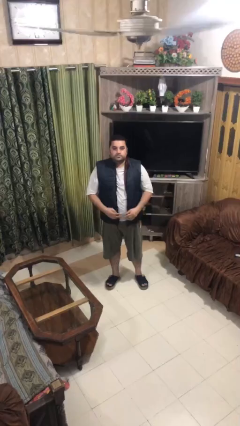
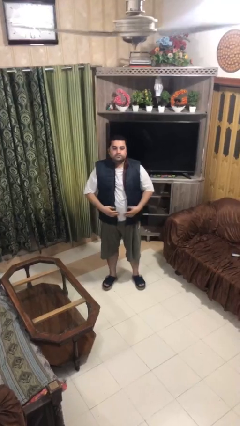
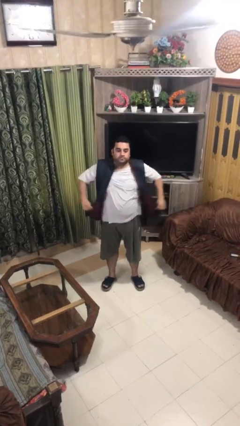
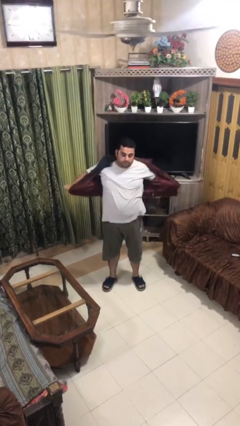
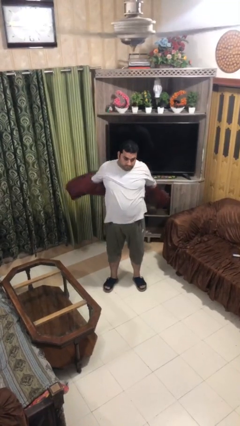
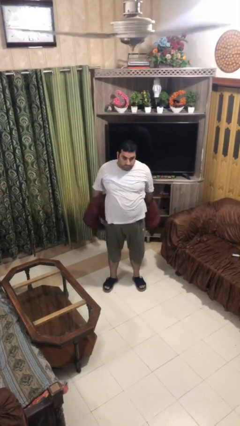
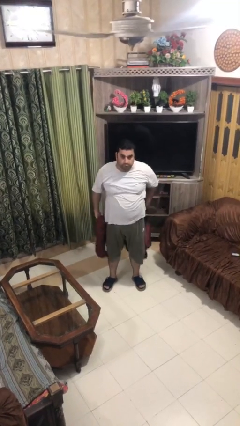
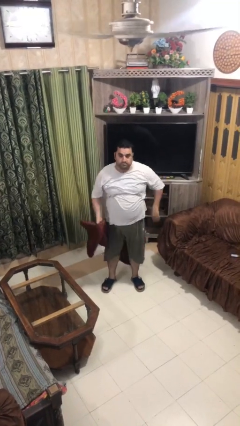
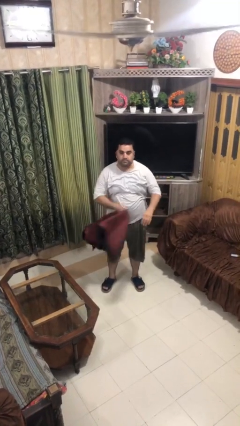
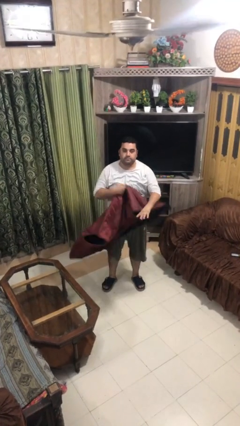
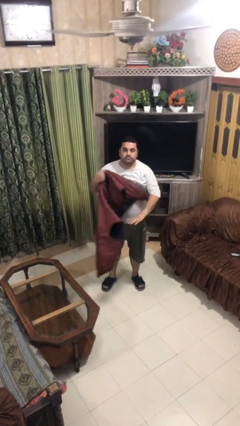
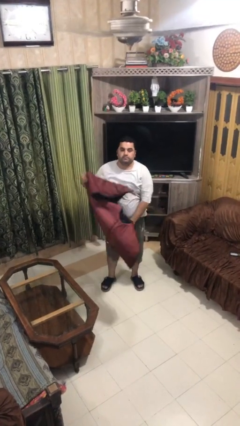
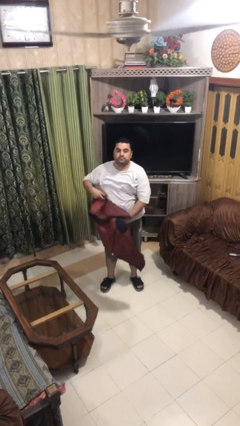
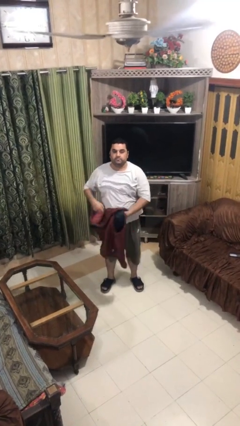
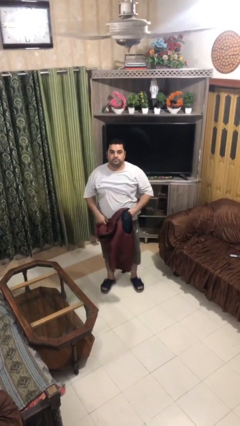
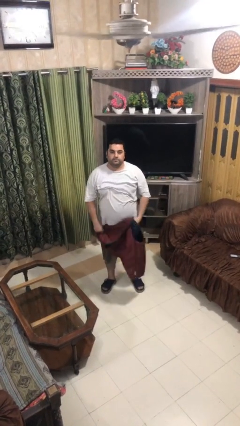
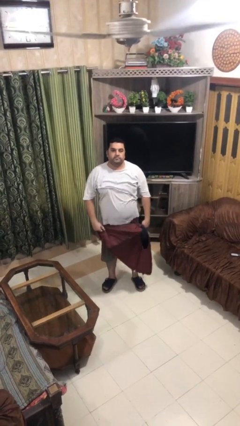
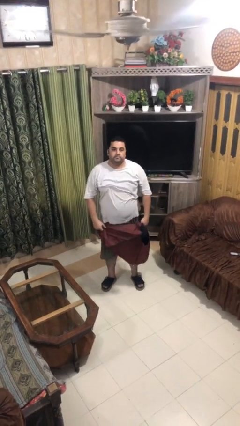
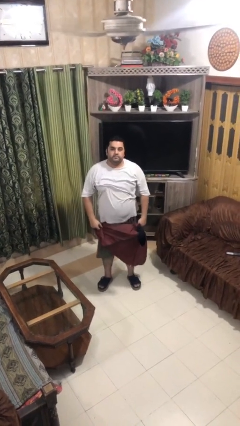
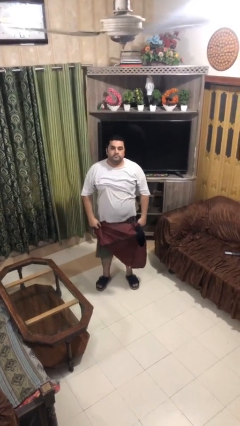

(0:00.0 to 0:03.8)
person takes off jacket

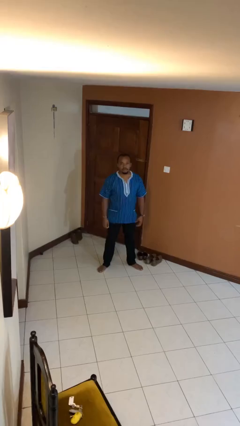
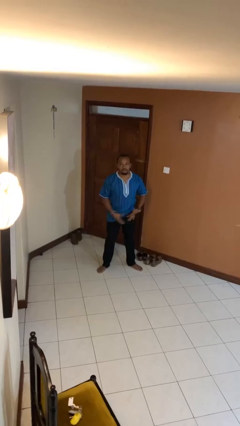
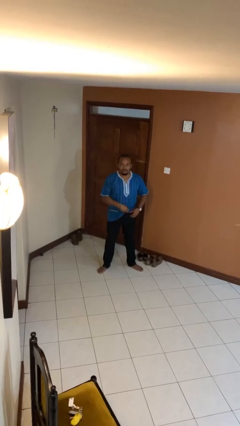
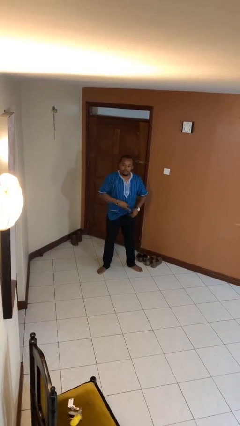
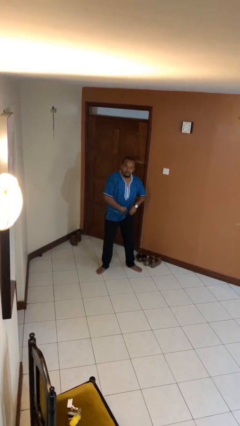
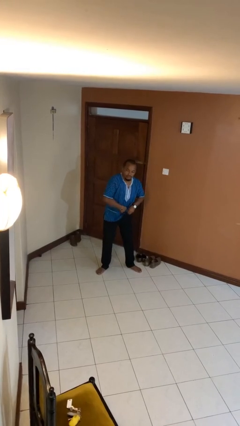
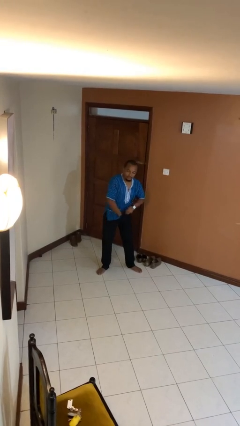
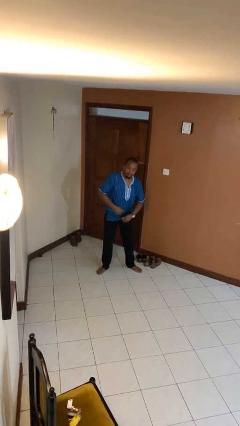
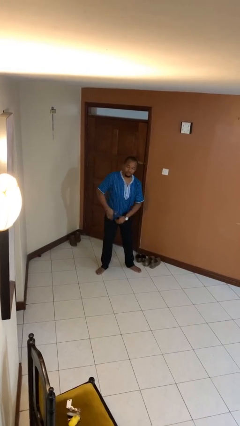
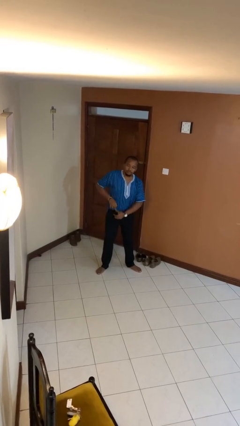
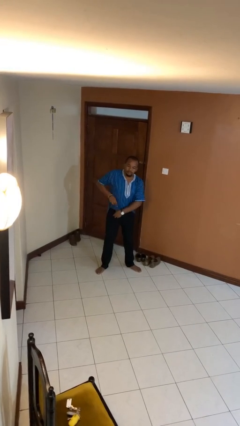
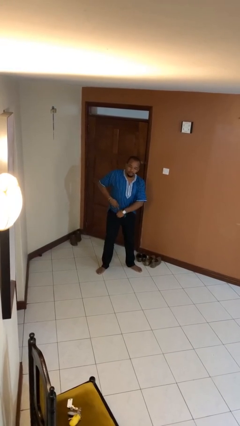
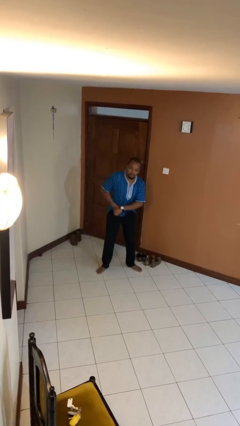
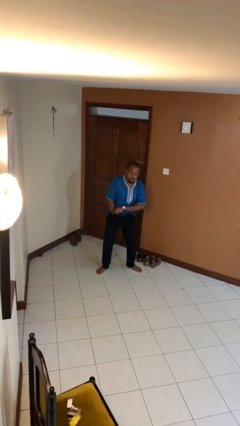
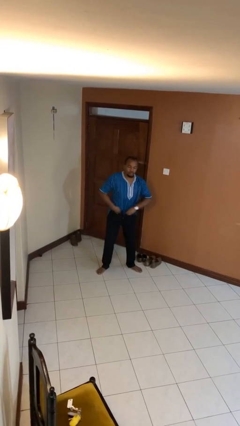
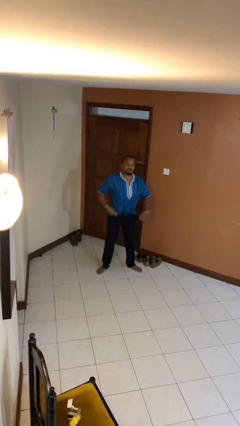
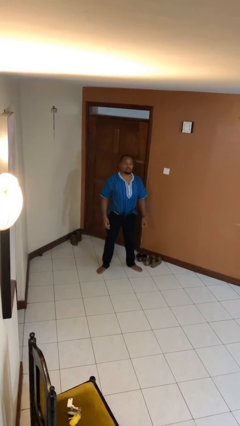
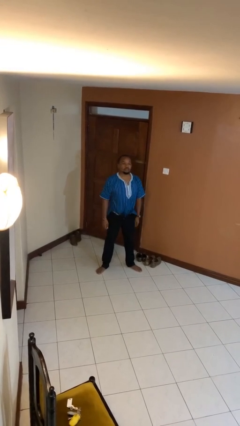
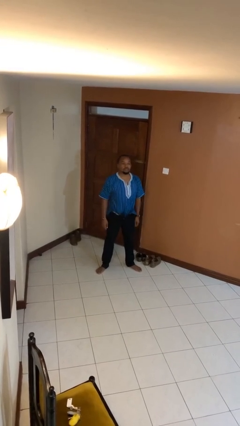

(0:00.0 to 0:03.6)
person tucks in shirt

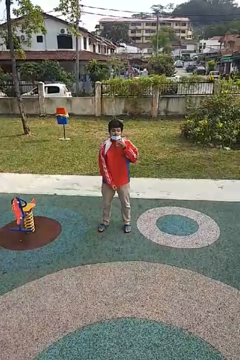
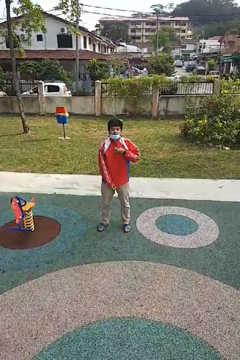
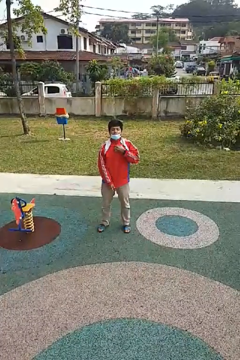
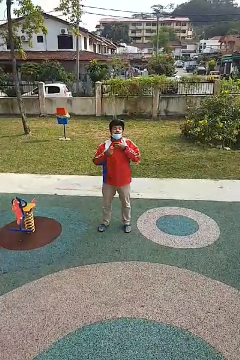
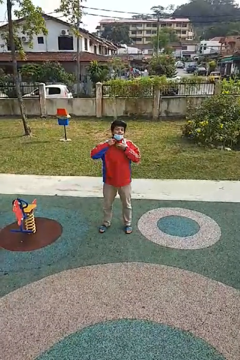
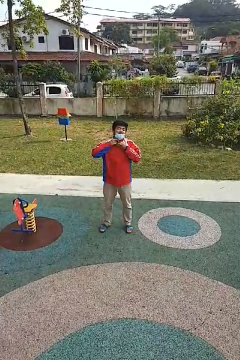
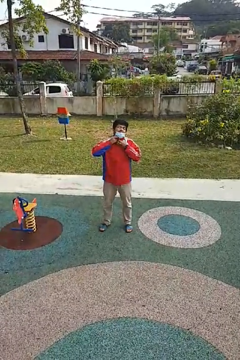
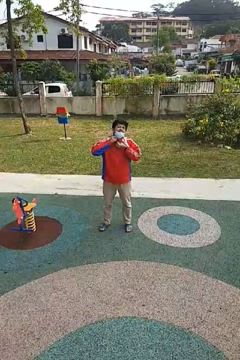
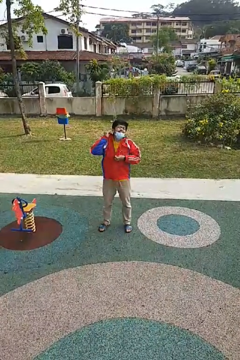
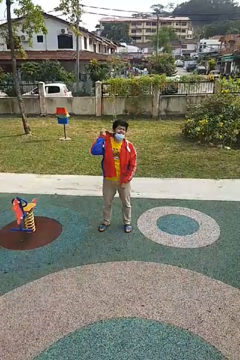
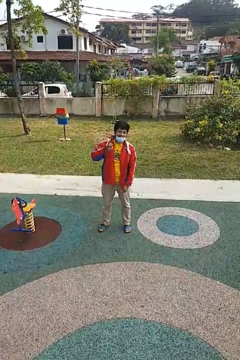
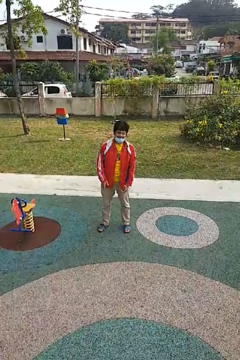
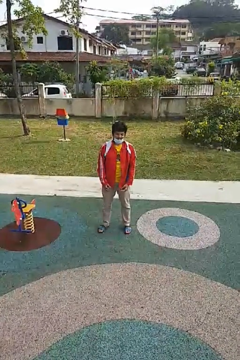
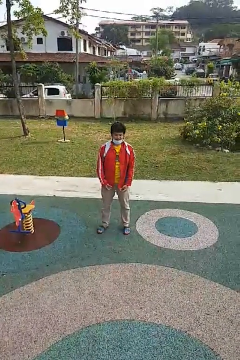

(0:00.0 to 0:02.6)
person unzips jacket

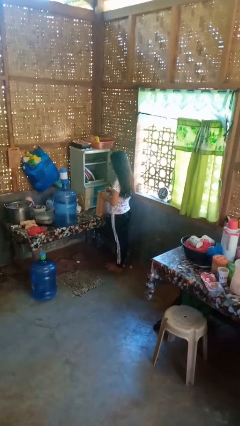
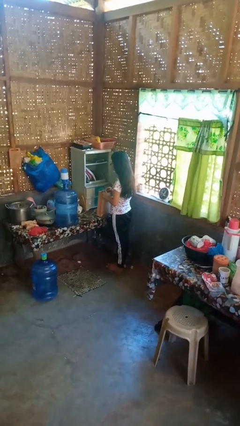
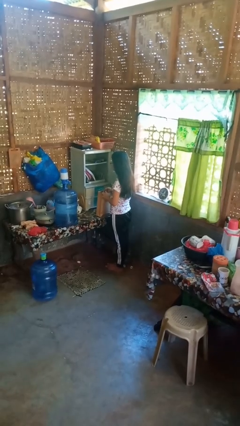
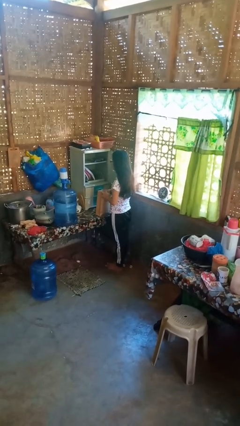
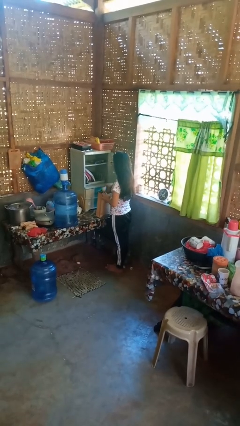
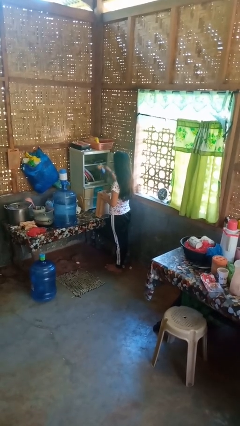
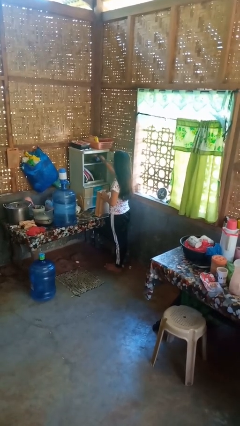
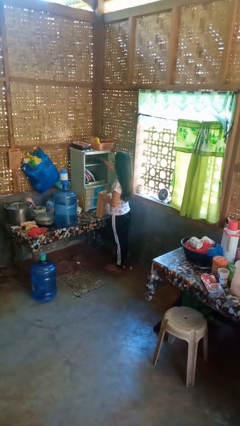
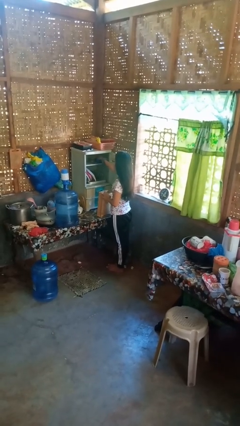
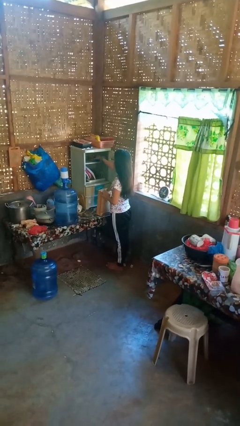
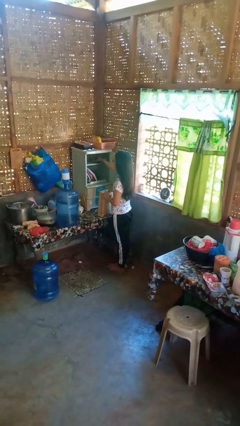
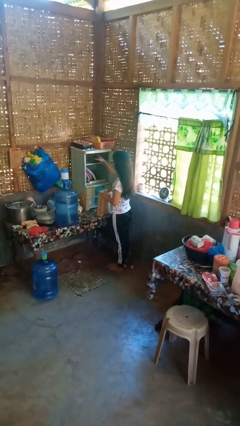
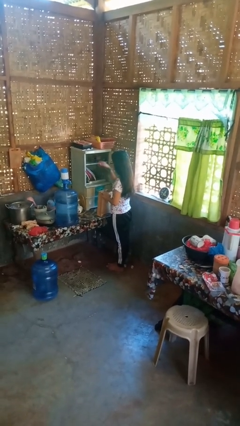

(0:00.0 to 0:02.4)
person loads groceries into cabinet

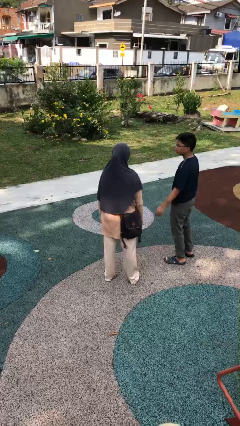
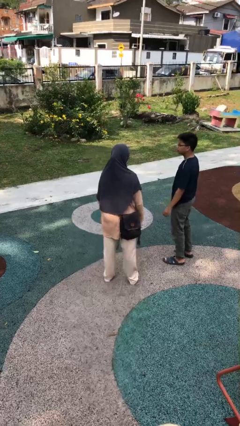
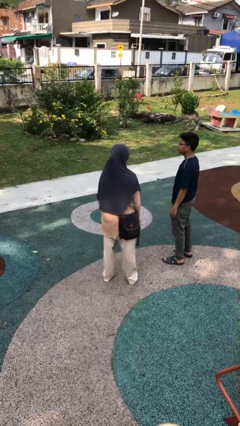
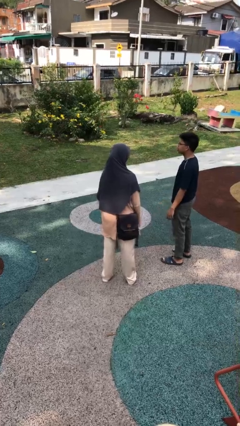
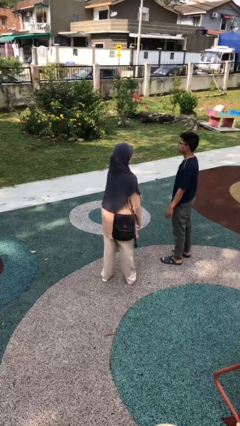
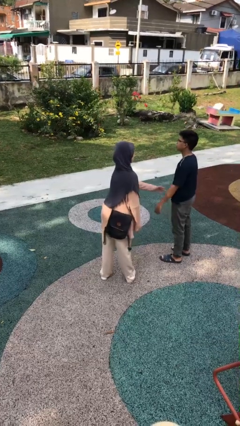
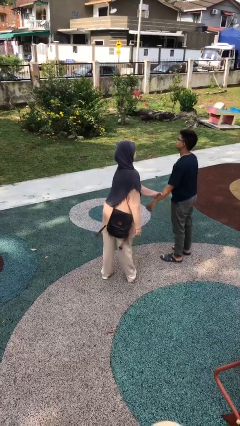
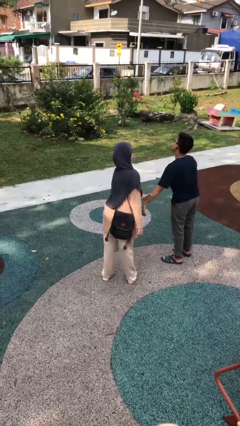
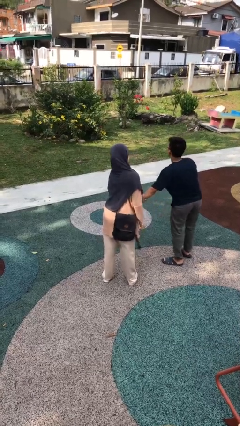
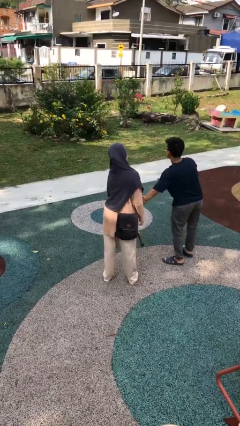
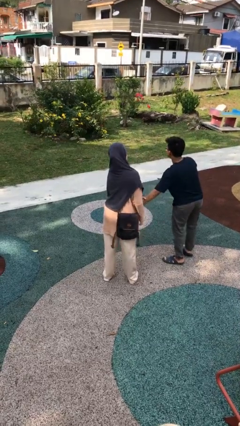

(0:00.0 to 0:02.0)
person grabs person by forearm

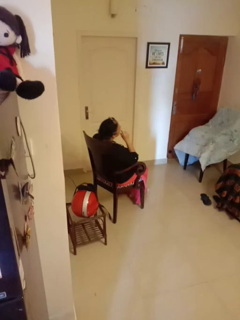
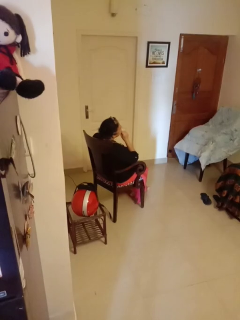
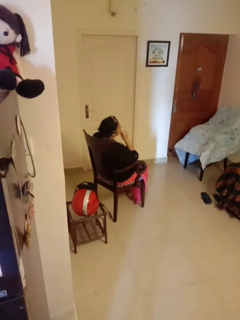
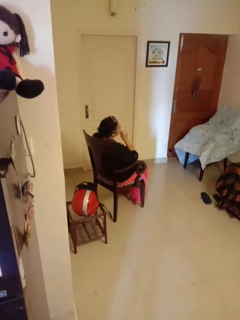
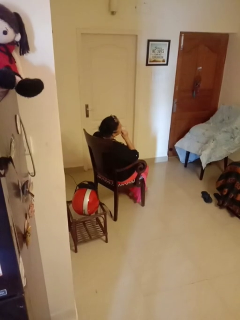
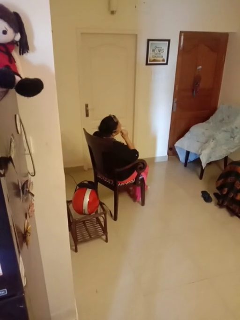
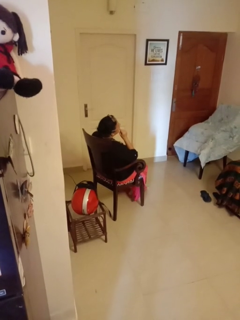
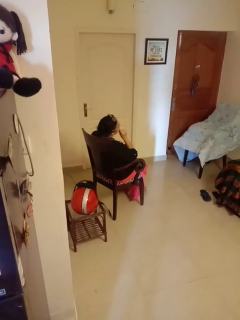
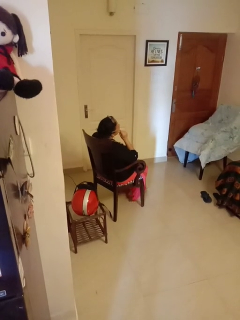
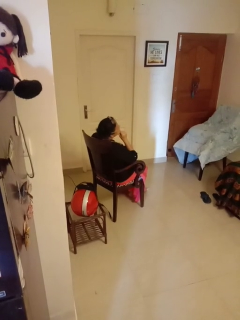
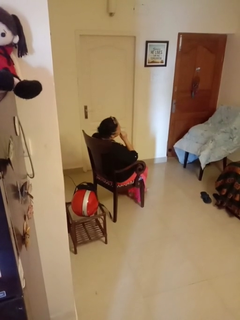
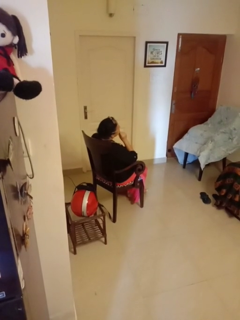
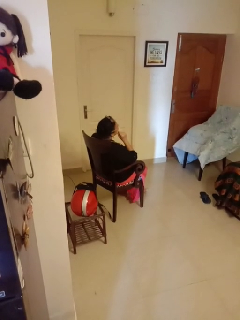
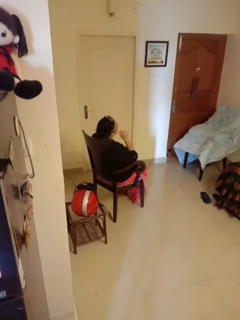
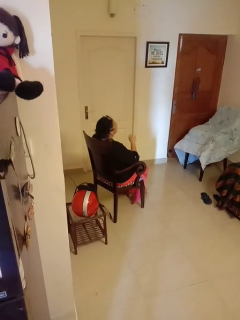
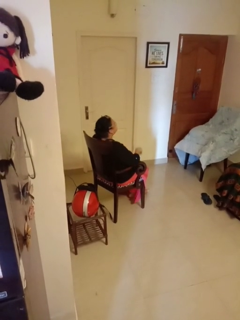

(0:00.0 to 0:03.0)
person strokes chin

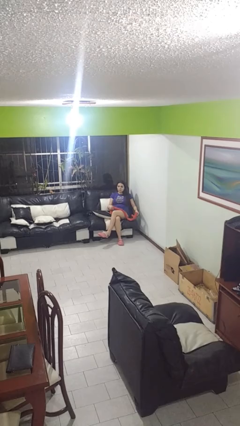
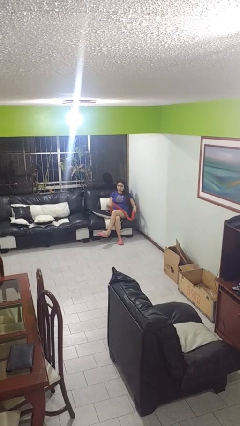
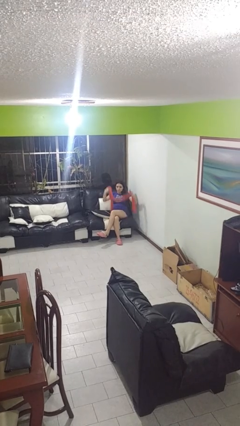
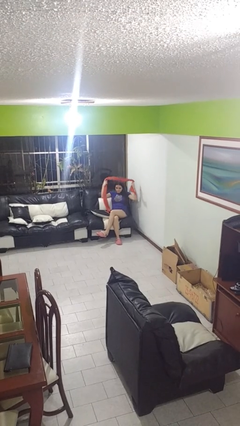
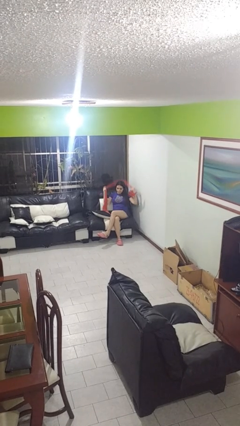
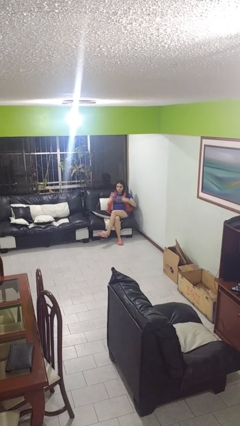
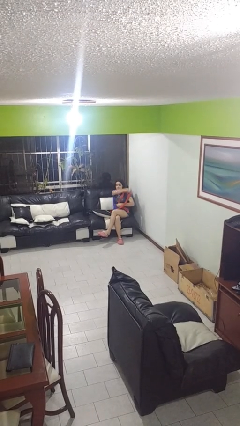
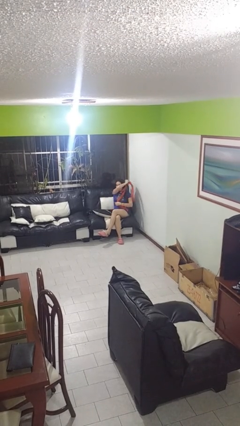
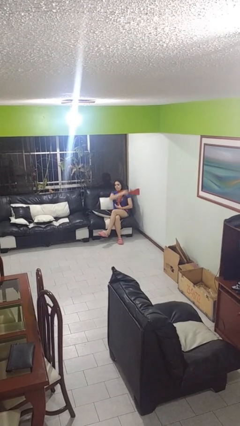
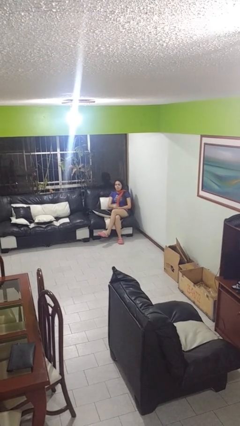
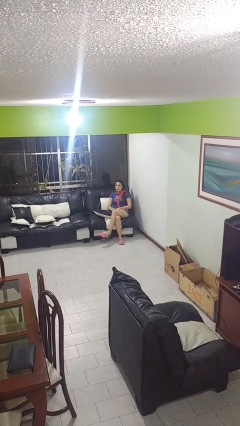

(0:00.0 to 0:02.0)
person puts on scarf
